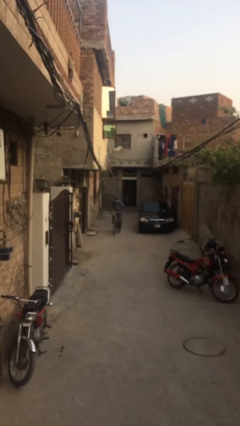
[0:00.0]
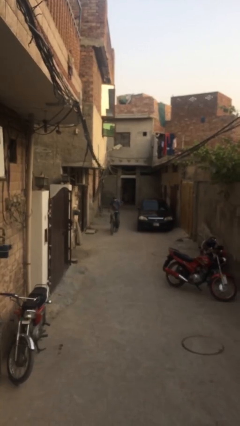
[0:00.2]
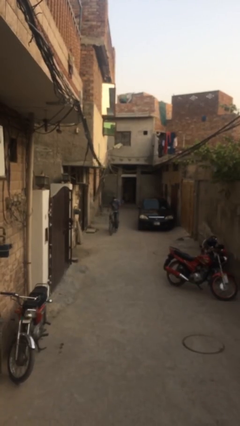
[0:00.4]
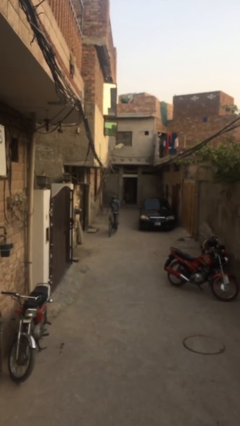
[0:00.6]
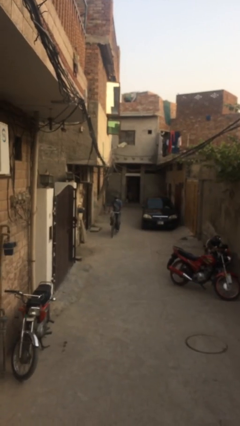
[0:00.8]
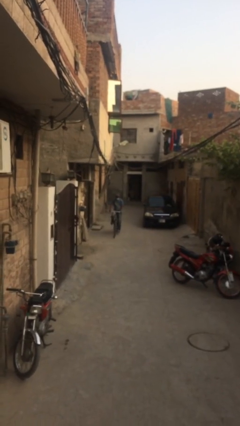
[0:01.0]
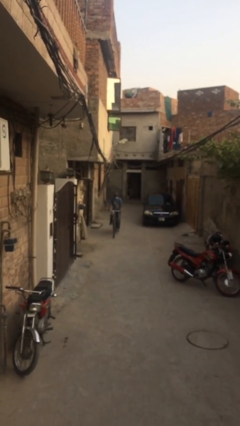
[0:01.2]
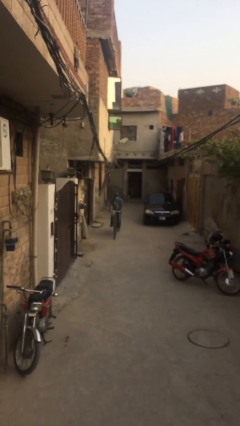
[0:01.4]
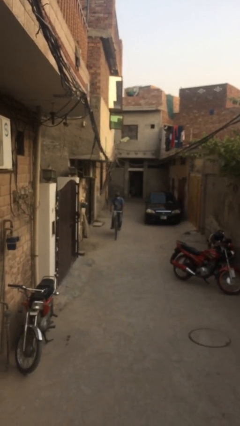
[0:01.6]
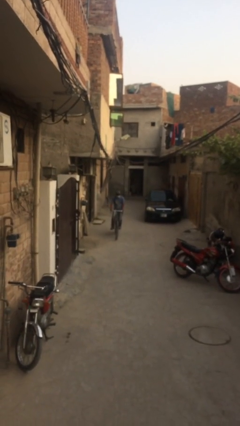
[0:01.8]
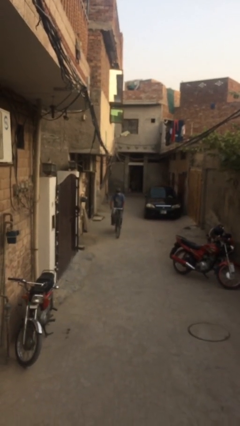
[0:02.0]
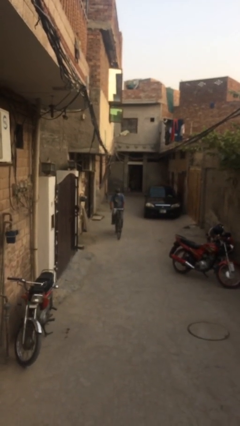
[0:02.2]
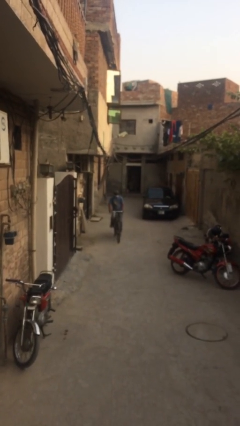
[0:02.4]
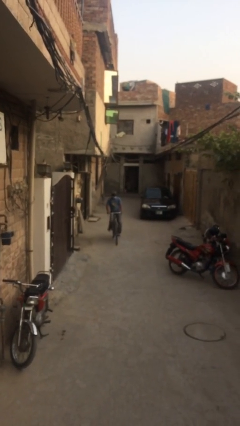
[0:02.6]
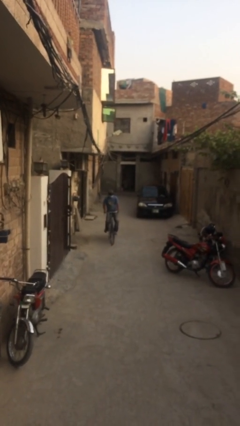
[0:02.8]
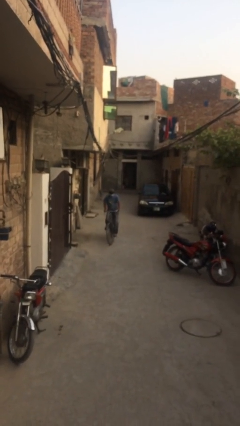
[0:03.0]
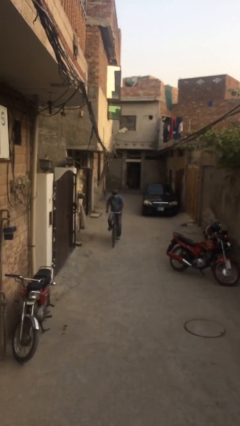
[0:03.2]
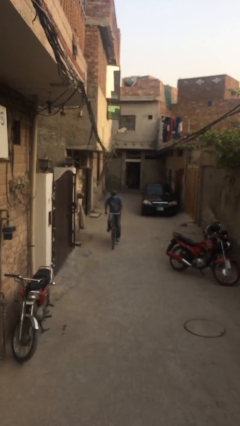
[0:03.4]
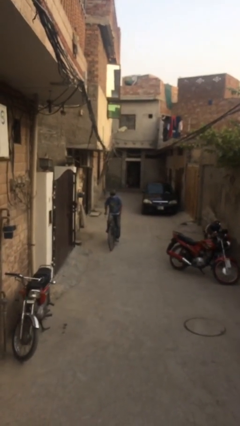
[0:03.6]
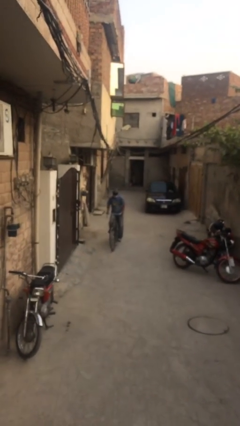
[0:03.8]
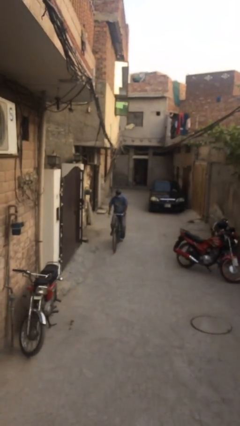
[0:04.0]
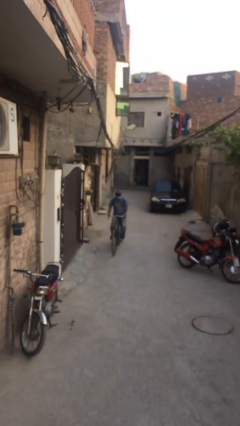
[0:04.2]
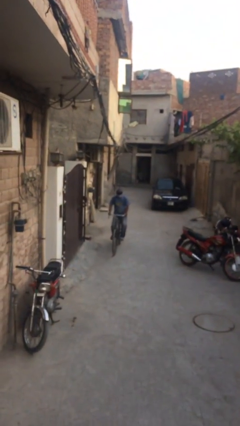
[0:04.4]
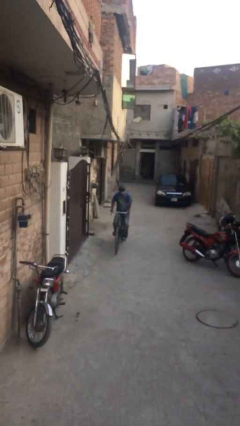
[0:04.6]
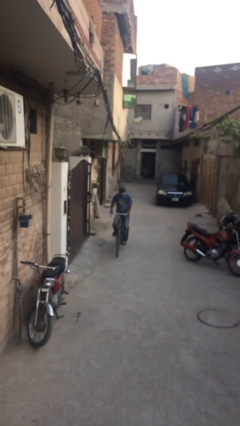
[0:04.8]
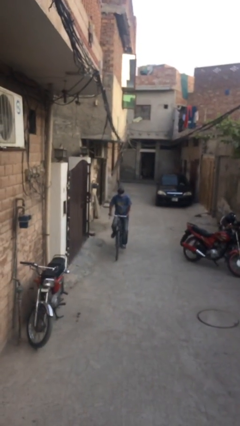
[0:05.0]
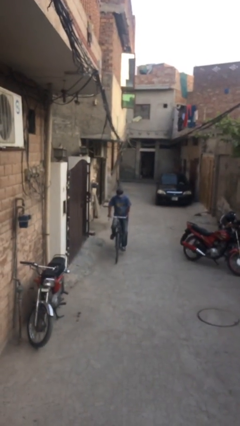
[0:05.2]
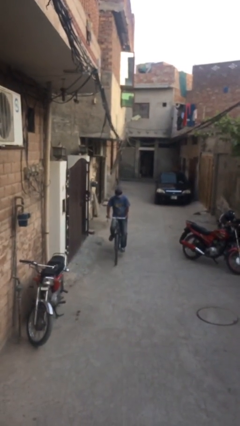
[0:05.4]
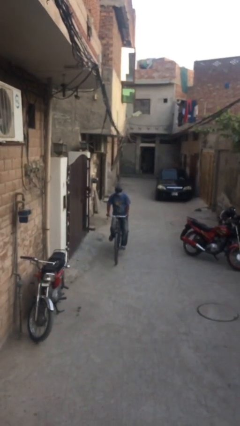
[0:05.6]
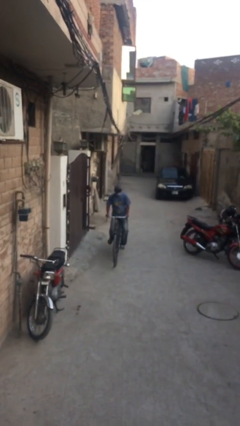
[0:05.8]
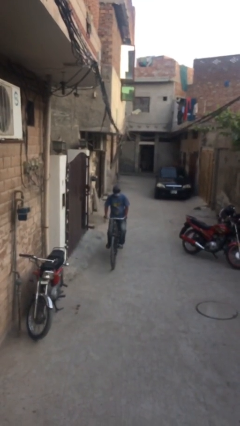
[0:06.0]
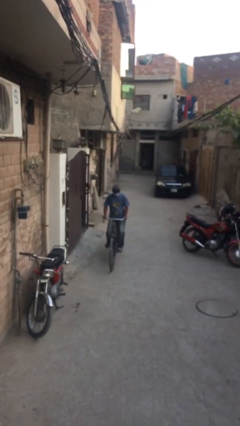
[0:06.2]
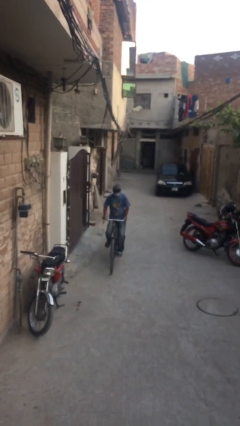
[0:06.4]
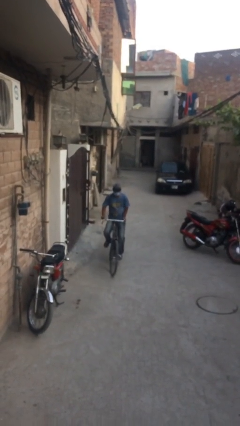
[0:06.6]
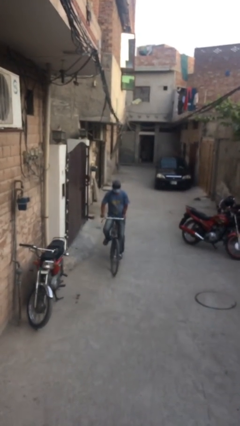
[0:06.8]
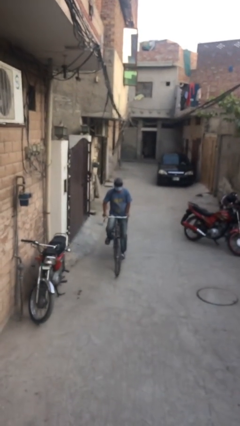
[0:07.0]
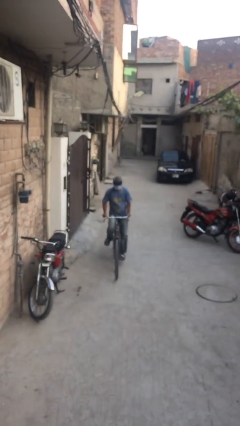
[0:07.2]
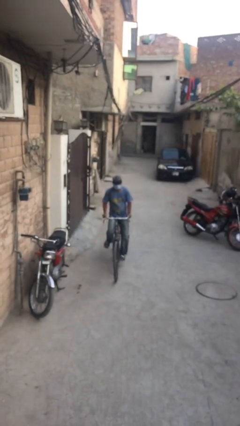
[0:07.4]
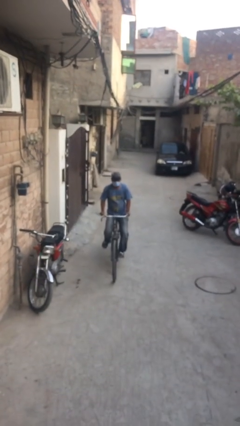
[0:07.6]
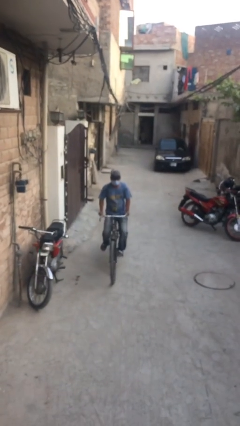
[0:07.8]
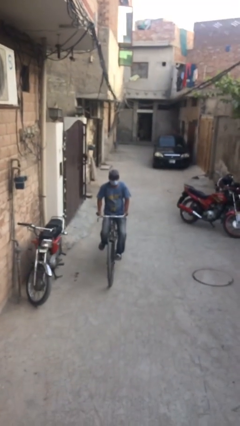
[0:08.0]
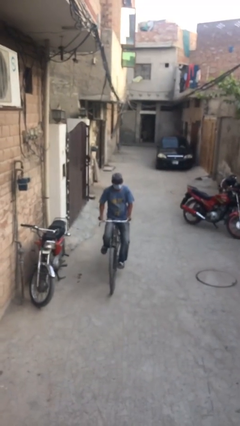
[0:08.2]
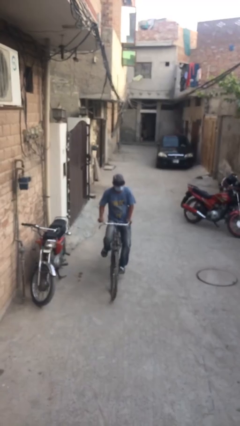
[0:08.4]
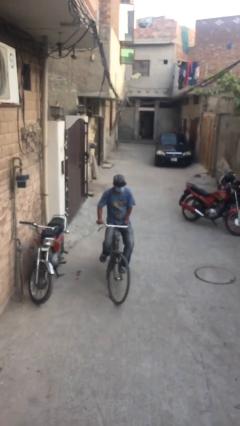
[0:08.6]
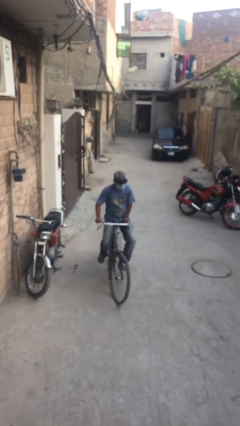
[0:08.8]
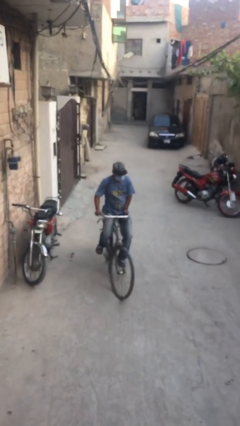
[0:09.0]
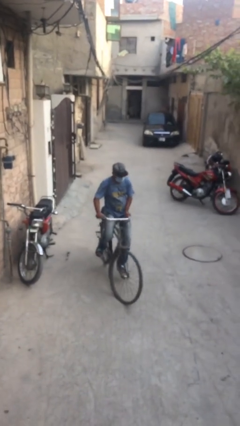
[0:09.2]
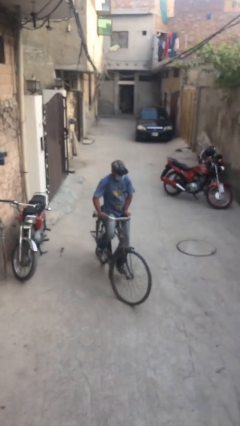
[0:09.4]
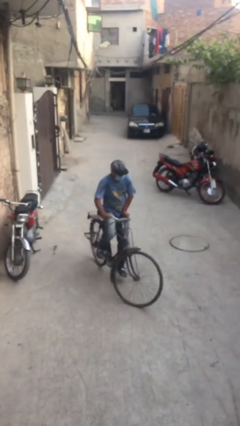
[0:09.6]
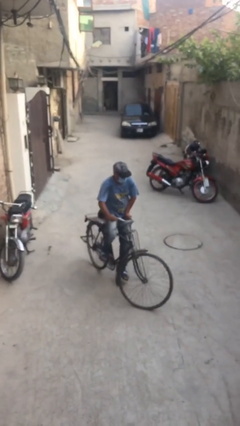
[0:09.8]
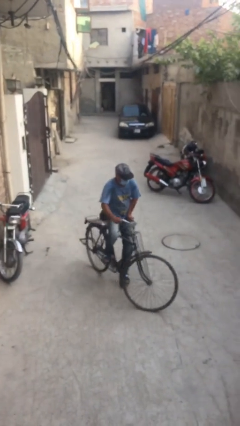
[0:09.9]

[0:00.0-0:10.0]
person rides bicycle

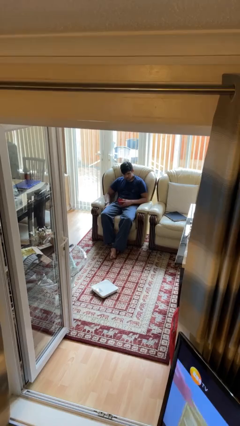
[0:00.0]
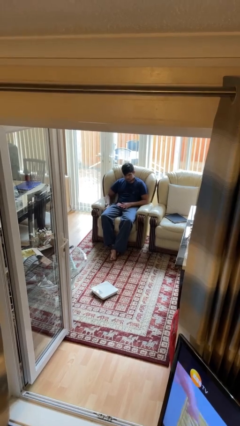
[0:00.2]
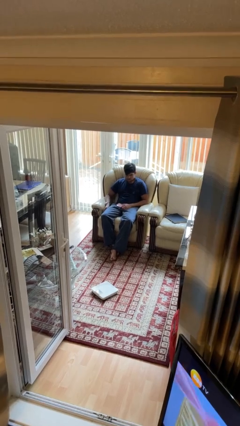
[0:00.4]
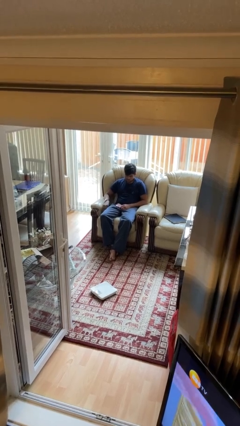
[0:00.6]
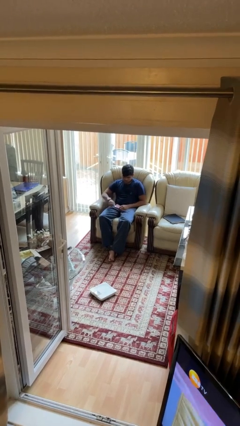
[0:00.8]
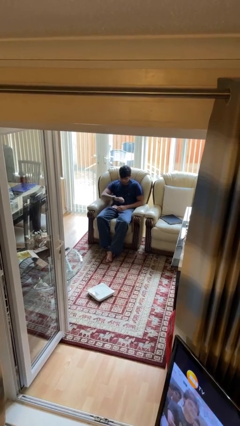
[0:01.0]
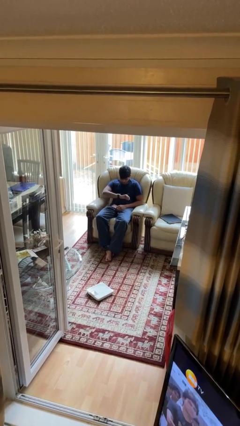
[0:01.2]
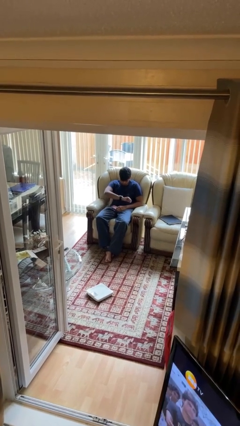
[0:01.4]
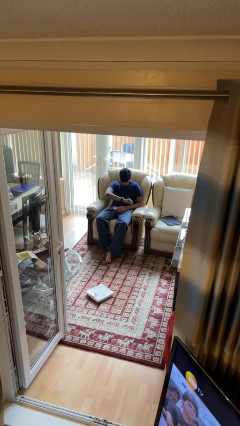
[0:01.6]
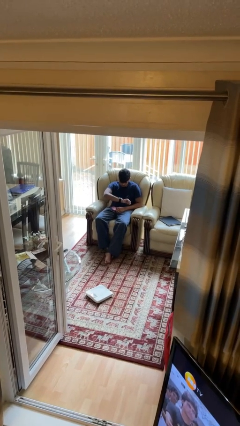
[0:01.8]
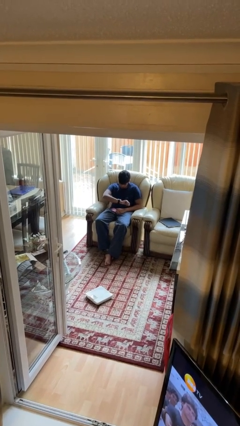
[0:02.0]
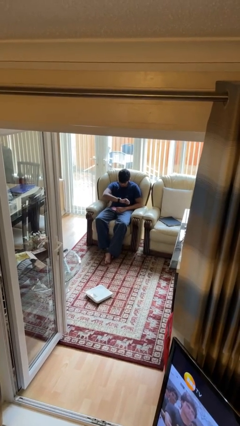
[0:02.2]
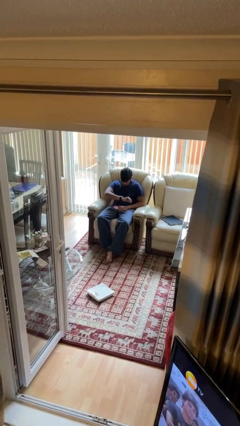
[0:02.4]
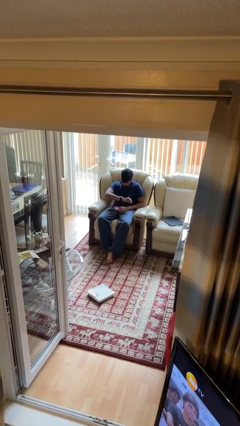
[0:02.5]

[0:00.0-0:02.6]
person looks at wristwatch

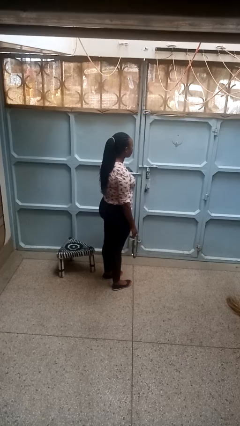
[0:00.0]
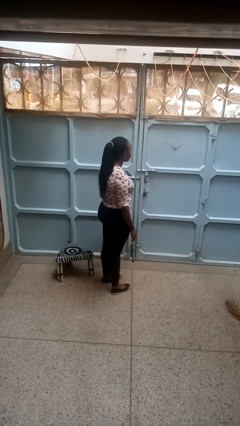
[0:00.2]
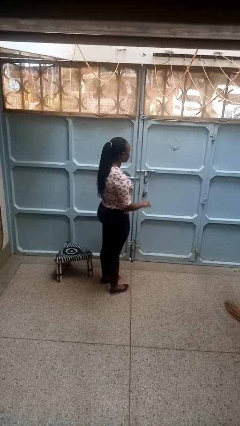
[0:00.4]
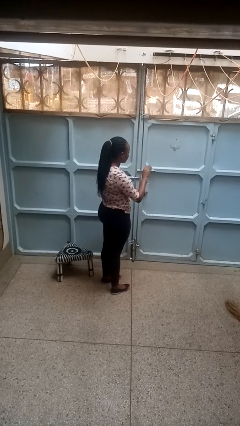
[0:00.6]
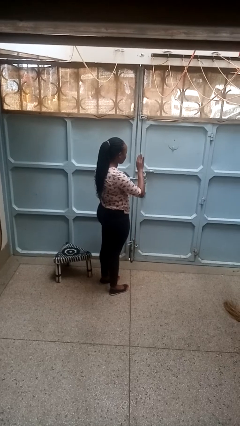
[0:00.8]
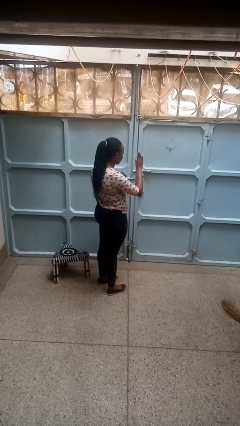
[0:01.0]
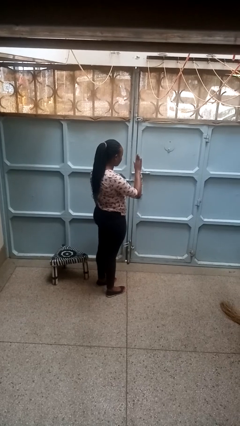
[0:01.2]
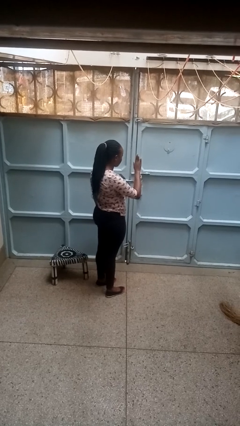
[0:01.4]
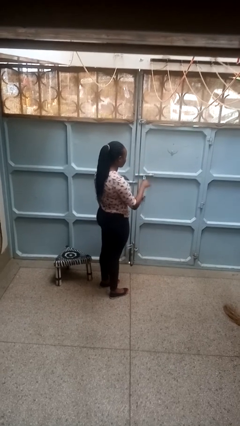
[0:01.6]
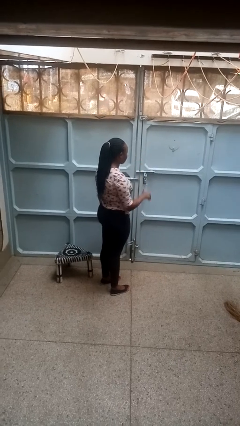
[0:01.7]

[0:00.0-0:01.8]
person gestures stop

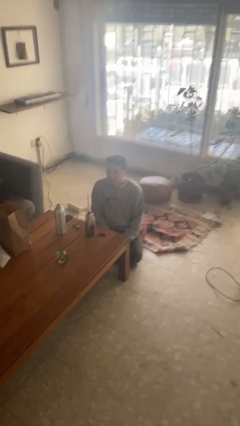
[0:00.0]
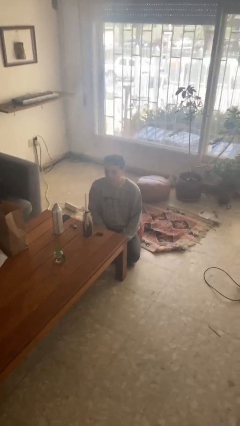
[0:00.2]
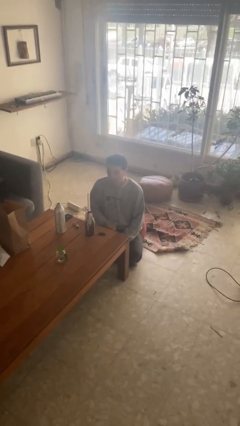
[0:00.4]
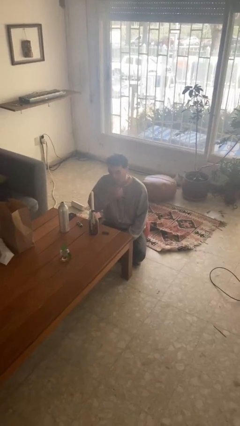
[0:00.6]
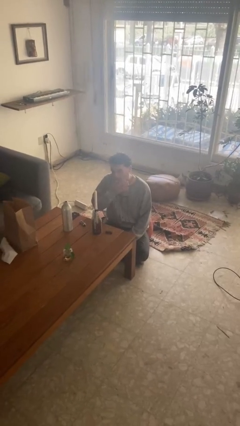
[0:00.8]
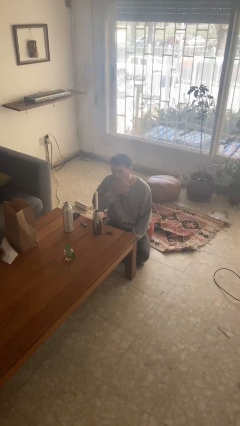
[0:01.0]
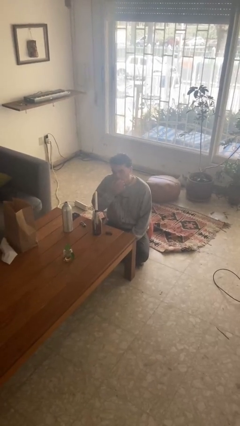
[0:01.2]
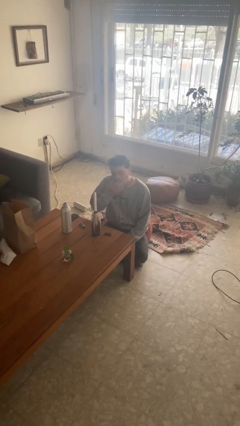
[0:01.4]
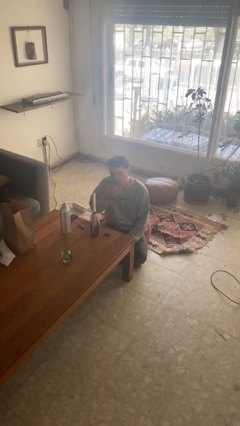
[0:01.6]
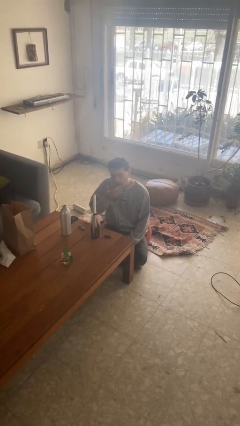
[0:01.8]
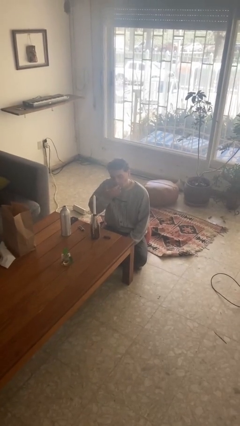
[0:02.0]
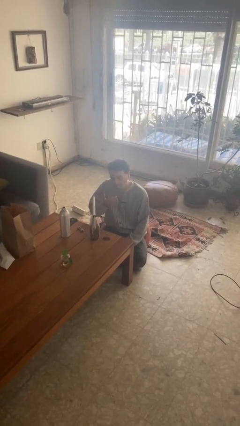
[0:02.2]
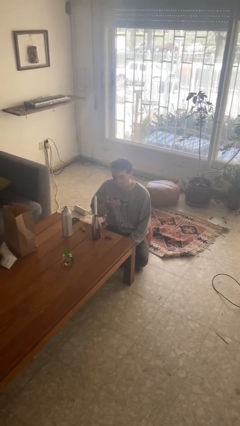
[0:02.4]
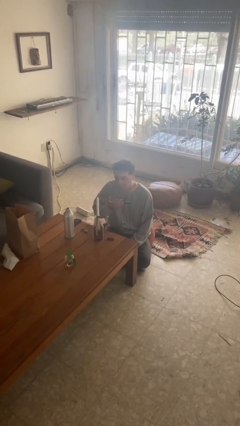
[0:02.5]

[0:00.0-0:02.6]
person licks fingers

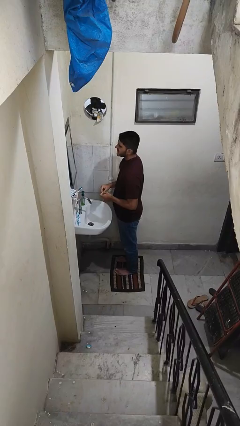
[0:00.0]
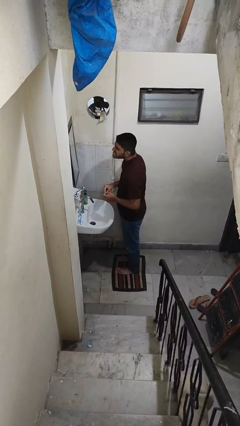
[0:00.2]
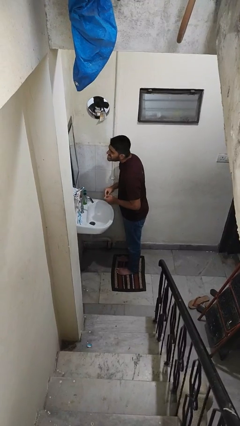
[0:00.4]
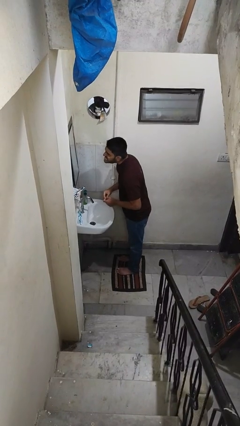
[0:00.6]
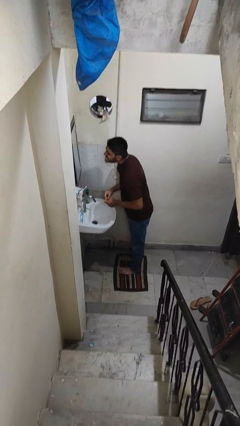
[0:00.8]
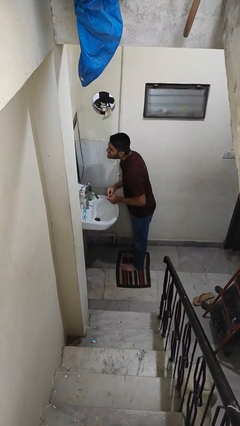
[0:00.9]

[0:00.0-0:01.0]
person flosses
